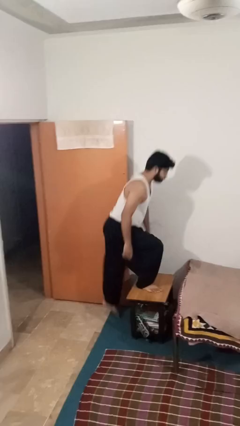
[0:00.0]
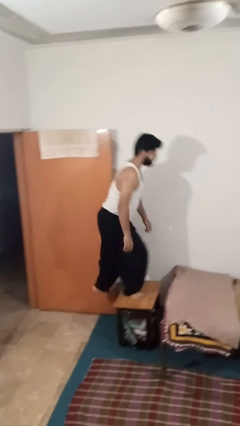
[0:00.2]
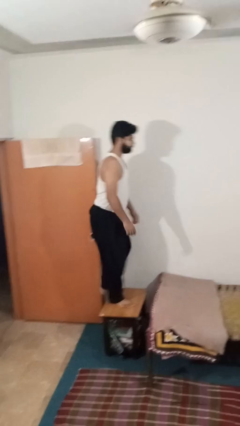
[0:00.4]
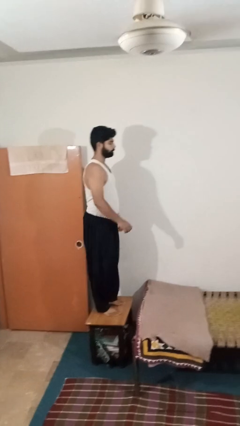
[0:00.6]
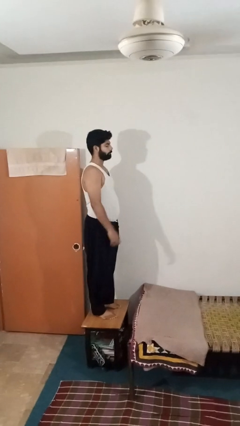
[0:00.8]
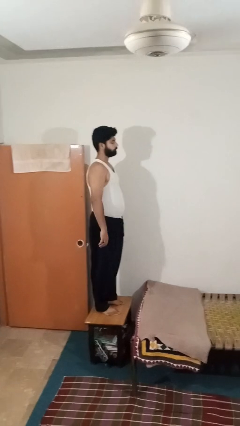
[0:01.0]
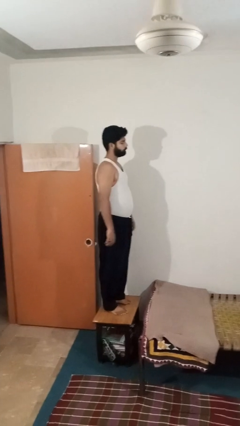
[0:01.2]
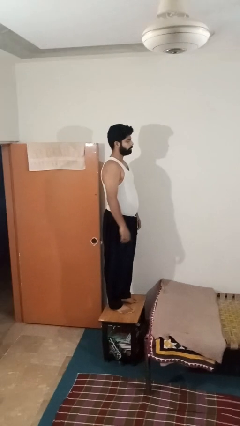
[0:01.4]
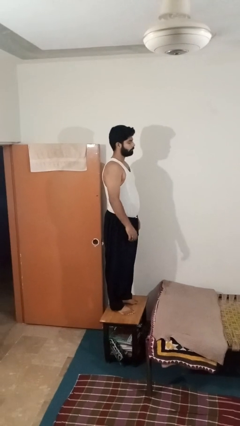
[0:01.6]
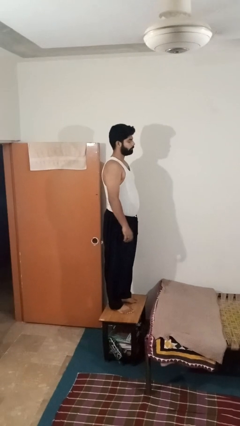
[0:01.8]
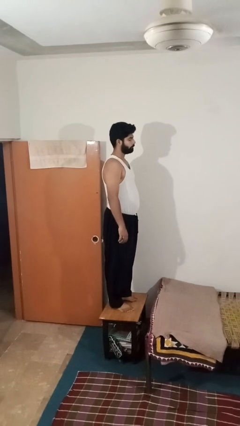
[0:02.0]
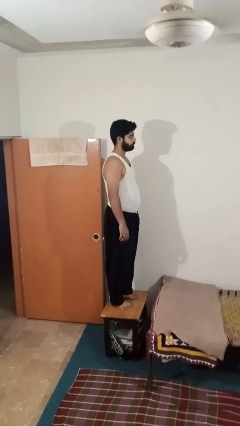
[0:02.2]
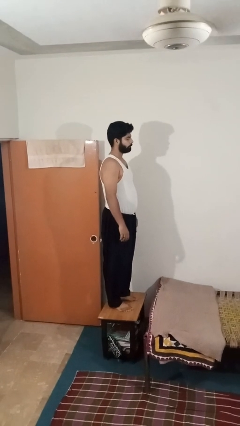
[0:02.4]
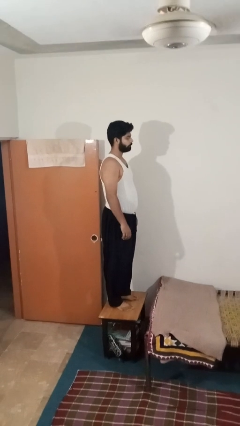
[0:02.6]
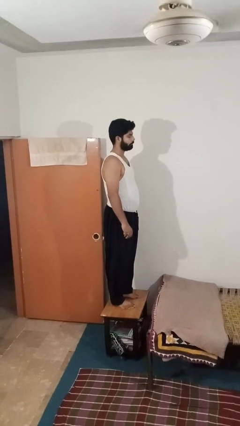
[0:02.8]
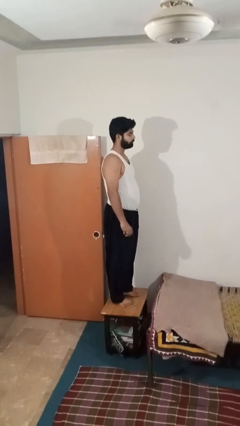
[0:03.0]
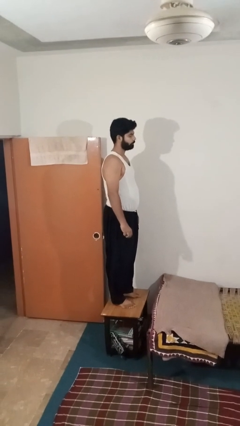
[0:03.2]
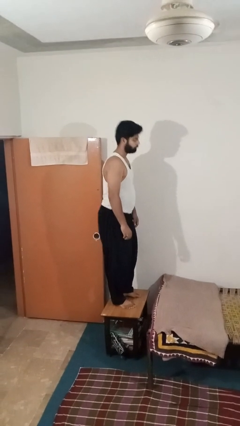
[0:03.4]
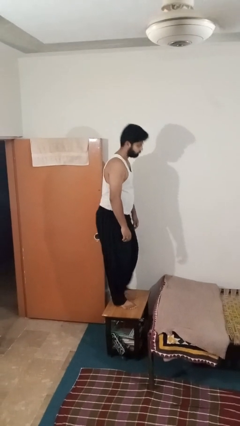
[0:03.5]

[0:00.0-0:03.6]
person climbs on table

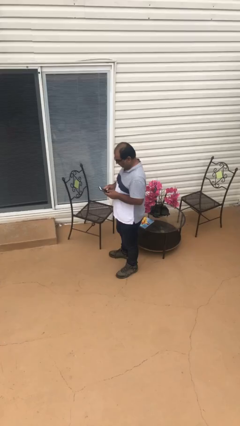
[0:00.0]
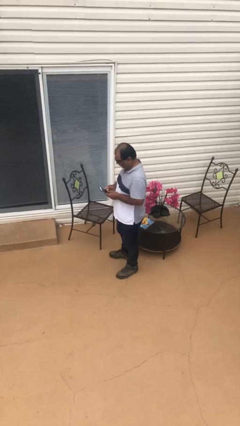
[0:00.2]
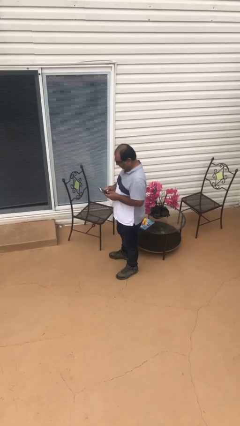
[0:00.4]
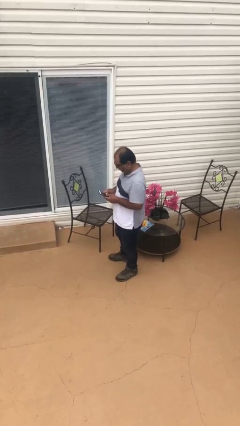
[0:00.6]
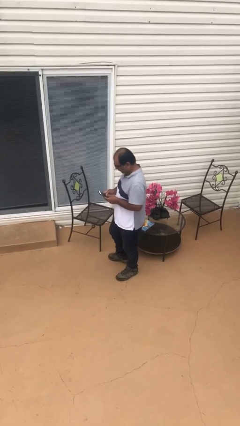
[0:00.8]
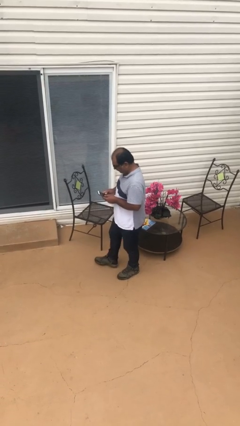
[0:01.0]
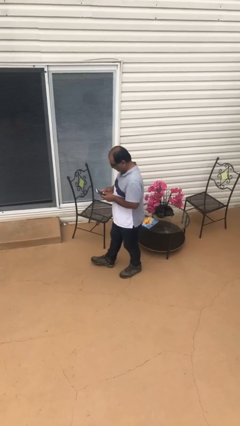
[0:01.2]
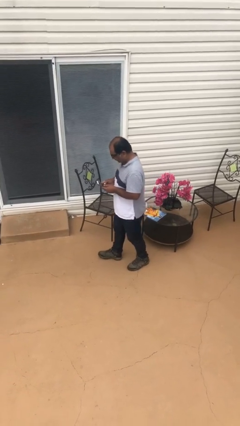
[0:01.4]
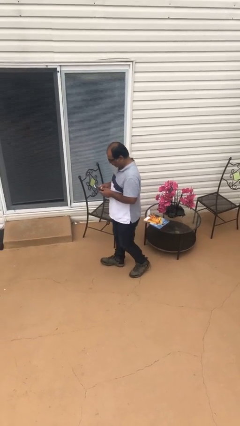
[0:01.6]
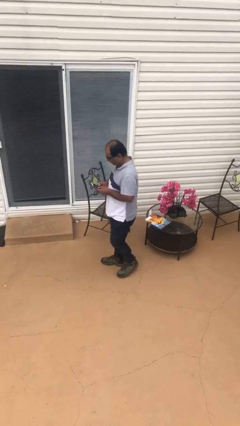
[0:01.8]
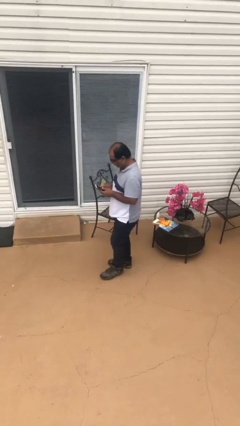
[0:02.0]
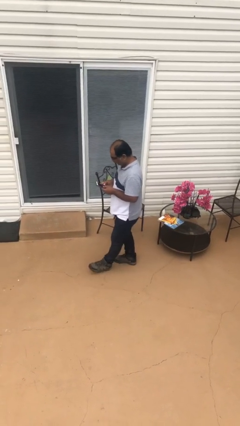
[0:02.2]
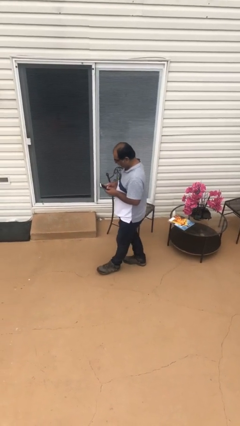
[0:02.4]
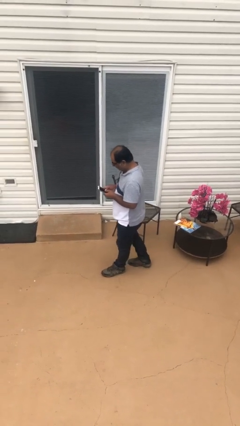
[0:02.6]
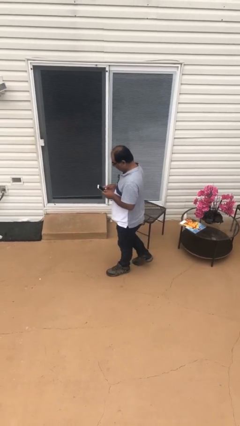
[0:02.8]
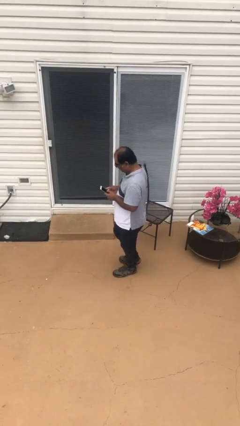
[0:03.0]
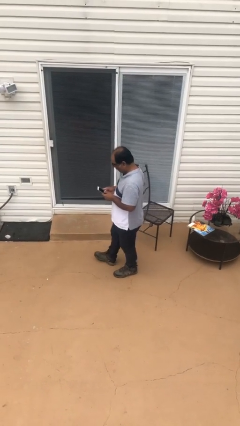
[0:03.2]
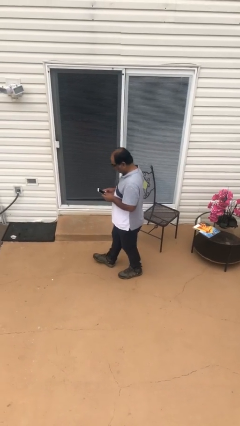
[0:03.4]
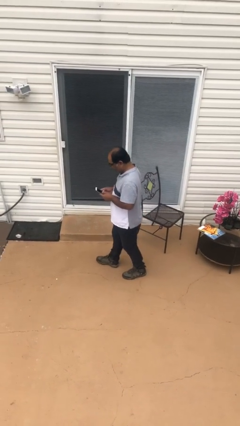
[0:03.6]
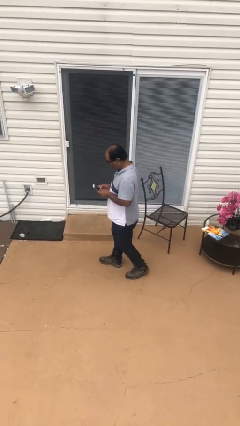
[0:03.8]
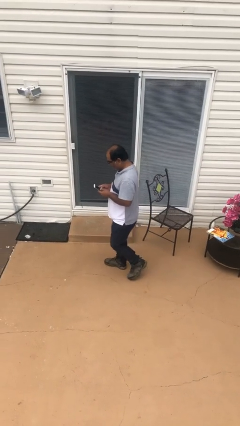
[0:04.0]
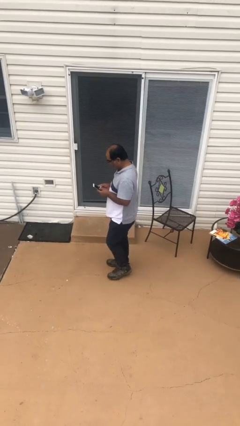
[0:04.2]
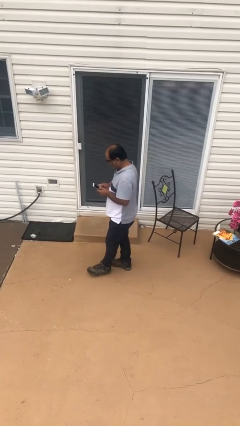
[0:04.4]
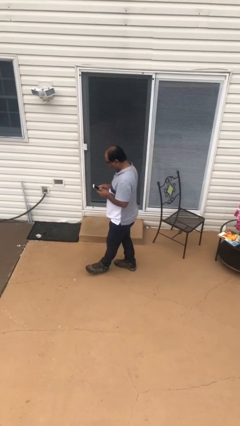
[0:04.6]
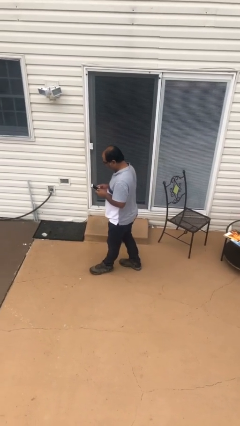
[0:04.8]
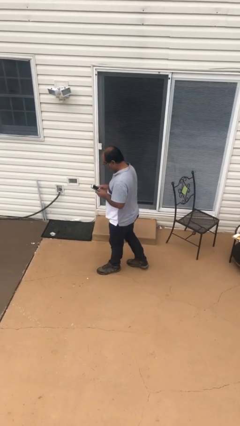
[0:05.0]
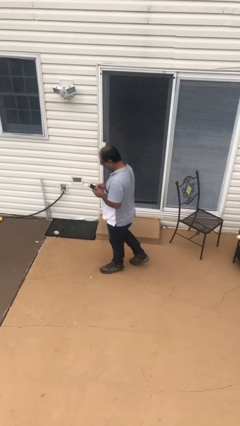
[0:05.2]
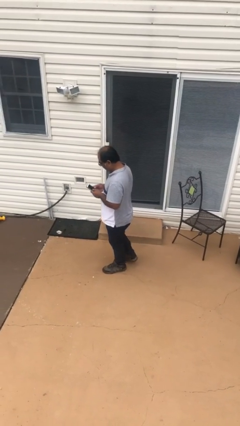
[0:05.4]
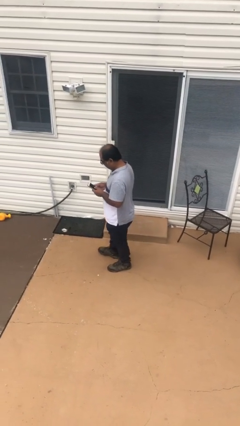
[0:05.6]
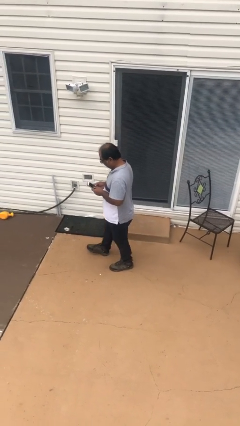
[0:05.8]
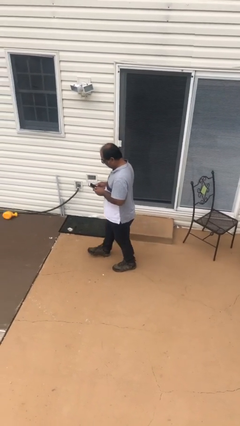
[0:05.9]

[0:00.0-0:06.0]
person texts on phone

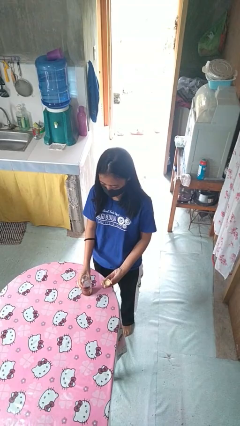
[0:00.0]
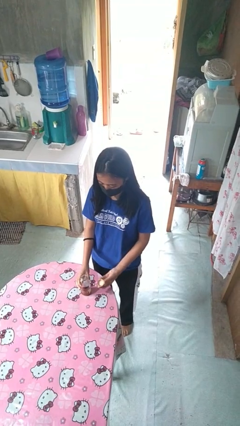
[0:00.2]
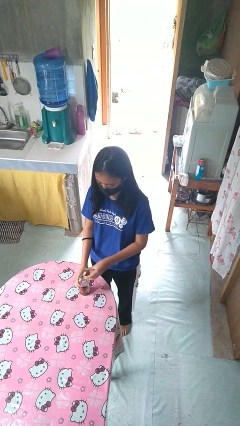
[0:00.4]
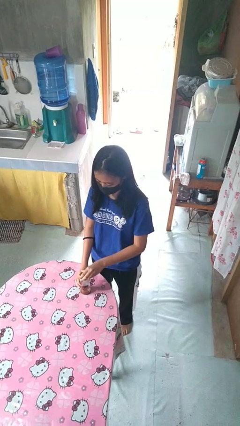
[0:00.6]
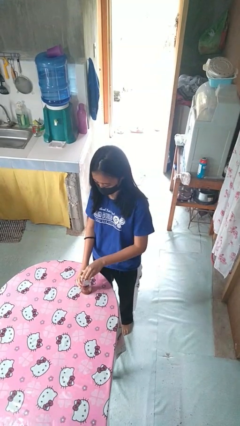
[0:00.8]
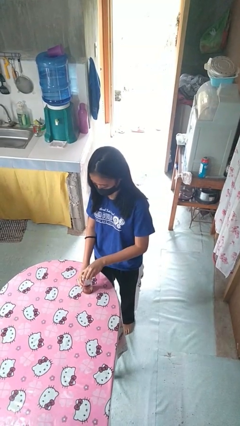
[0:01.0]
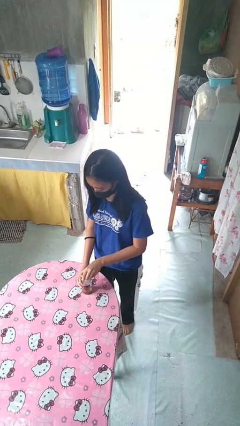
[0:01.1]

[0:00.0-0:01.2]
person closes jar

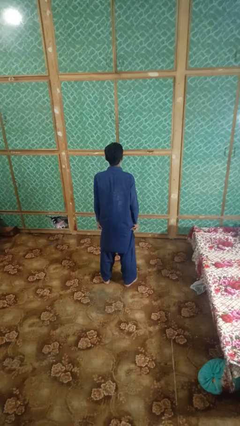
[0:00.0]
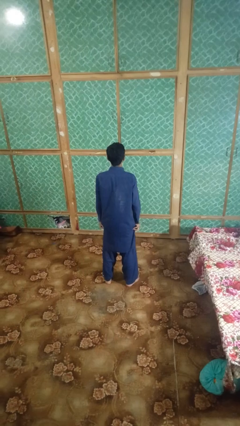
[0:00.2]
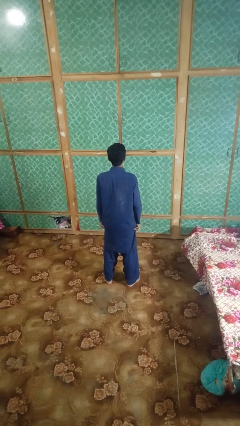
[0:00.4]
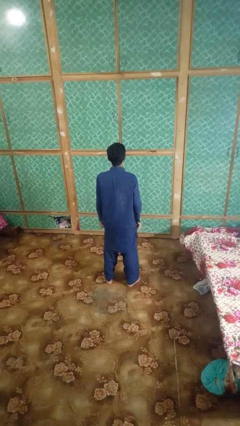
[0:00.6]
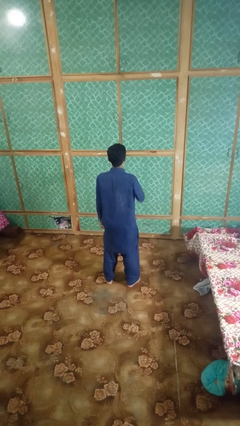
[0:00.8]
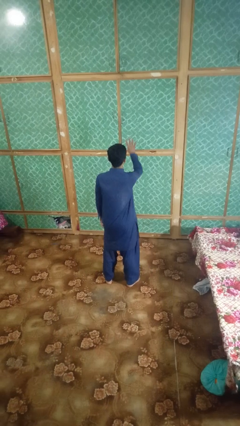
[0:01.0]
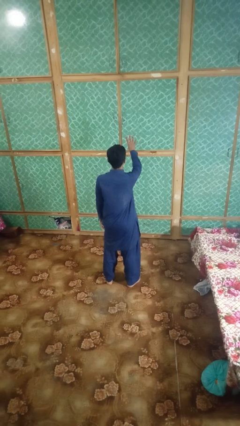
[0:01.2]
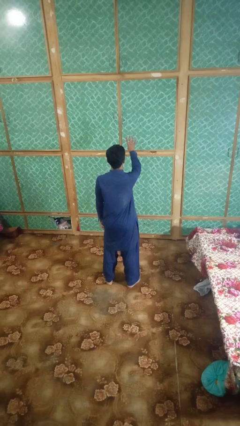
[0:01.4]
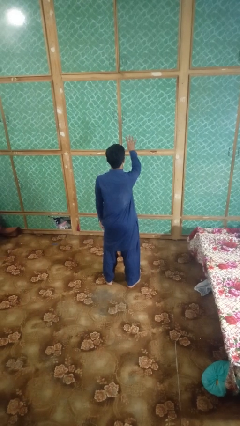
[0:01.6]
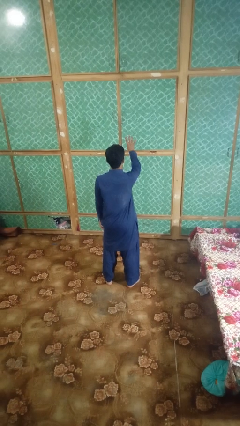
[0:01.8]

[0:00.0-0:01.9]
person gestures number four

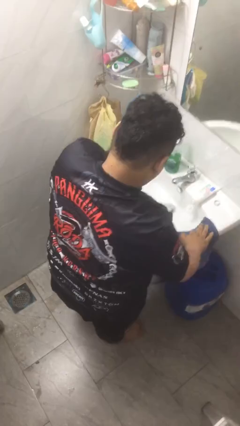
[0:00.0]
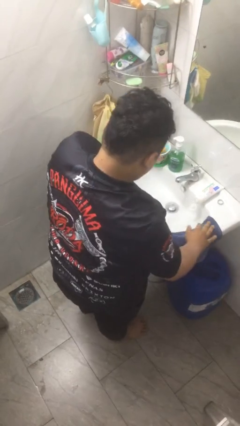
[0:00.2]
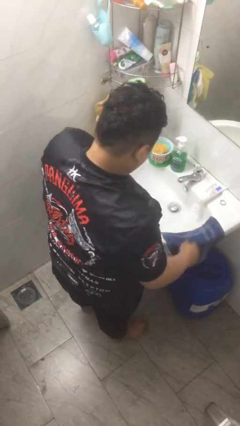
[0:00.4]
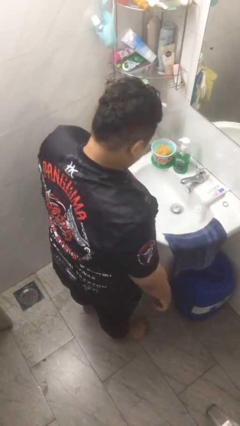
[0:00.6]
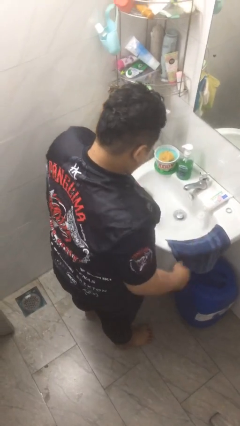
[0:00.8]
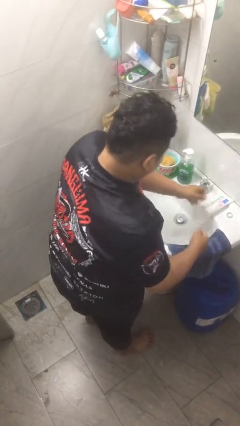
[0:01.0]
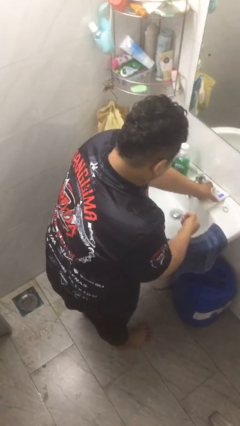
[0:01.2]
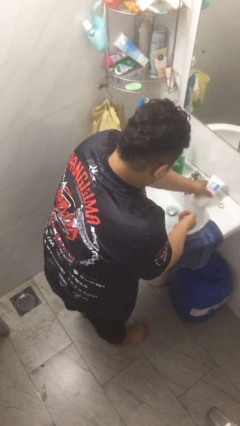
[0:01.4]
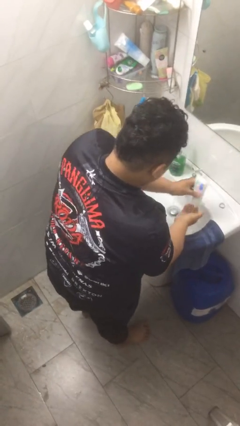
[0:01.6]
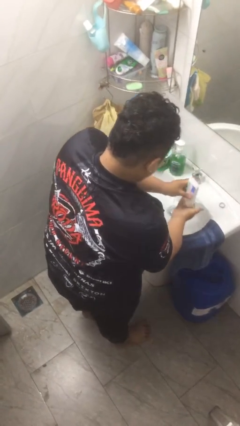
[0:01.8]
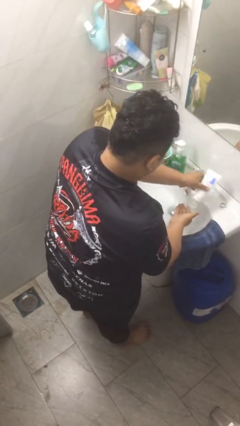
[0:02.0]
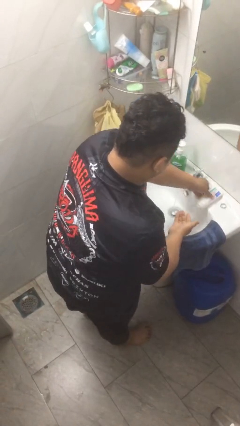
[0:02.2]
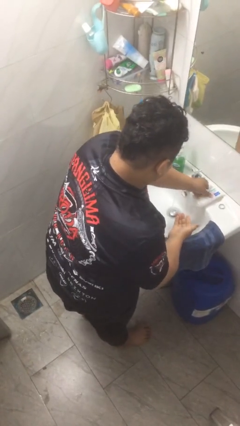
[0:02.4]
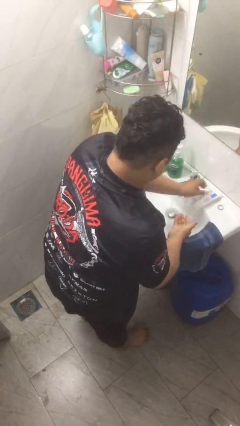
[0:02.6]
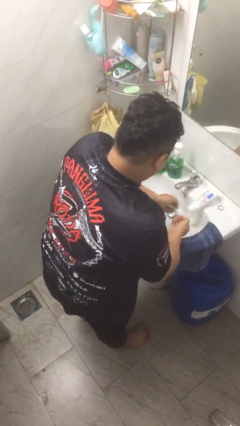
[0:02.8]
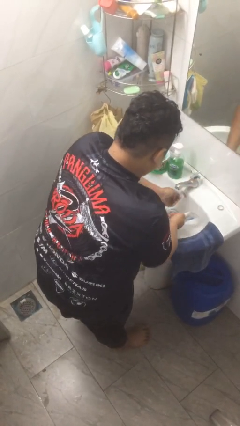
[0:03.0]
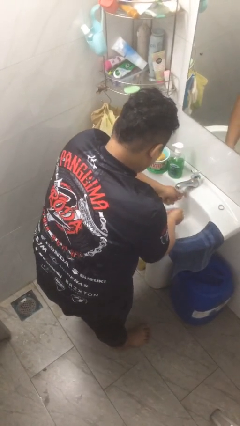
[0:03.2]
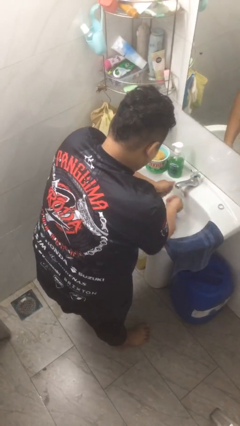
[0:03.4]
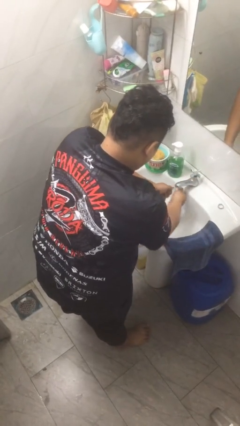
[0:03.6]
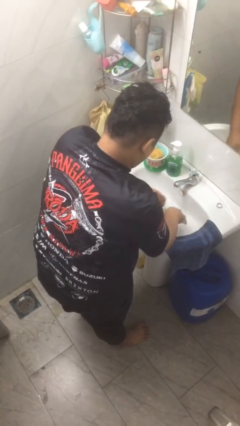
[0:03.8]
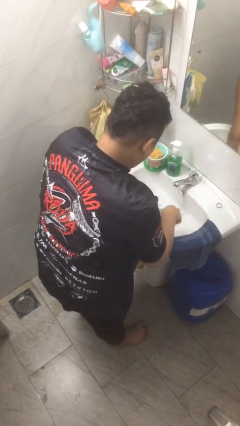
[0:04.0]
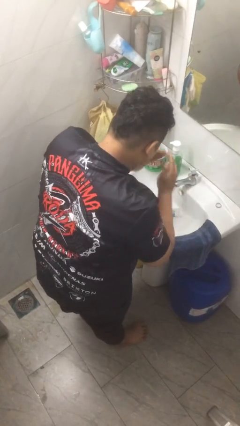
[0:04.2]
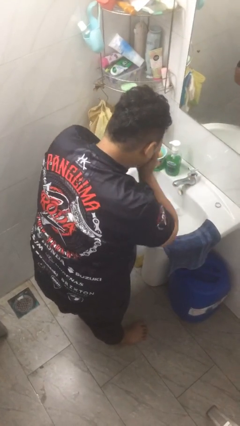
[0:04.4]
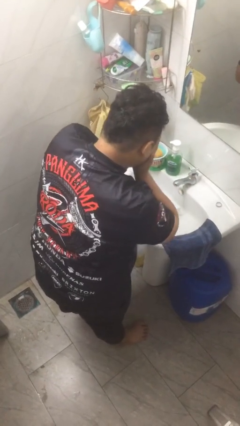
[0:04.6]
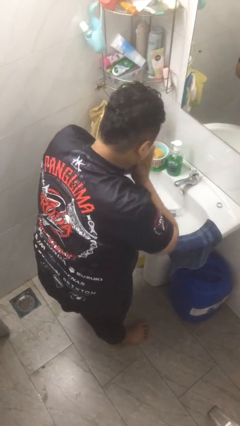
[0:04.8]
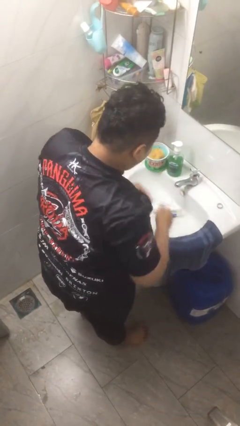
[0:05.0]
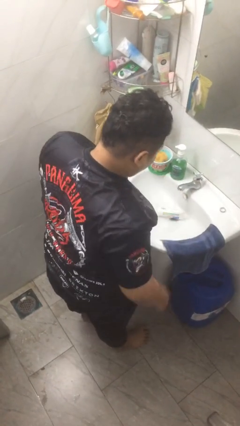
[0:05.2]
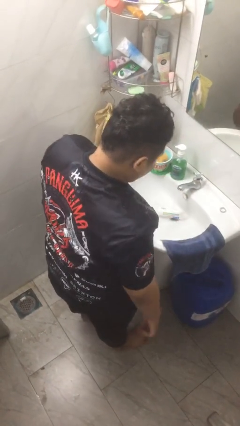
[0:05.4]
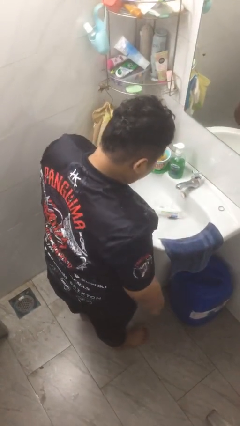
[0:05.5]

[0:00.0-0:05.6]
person washes face
